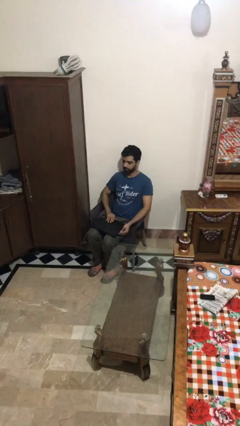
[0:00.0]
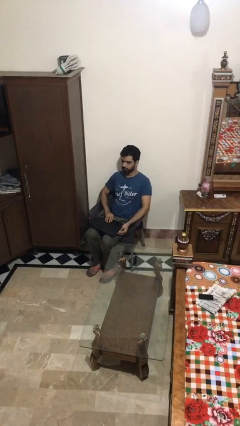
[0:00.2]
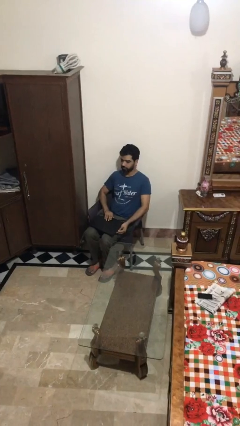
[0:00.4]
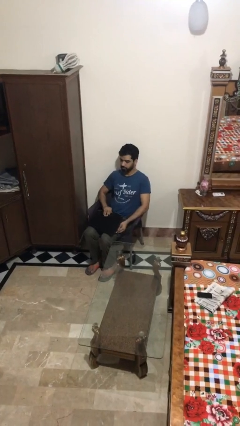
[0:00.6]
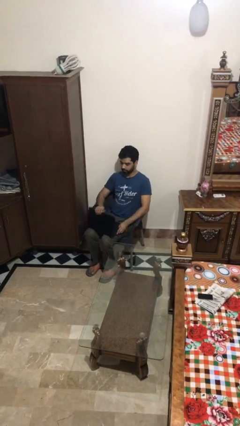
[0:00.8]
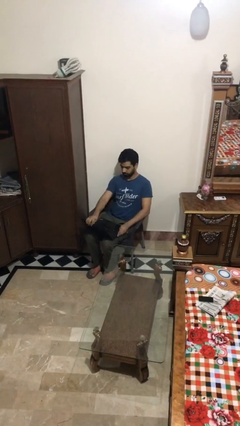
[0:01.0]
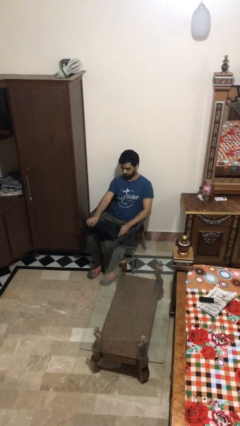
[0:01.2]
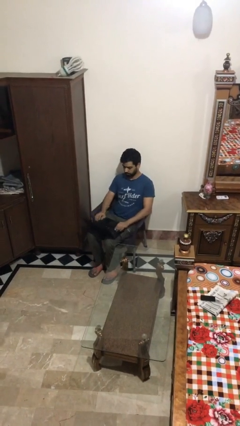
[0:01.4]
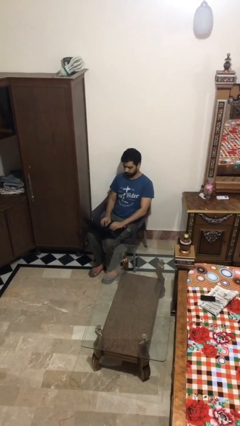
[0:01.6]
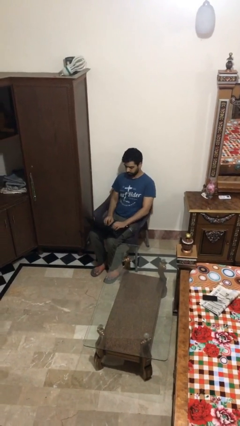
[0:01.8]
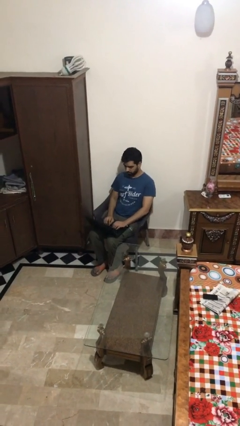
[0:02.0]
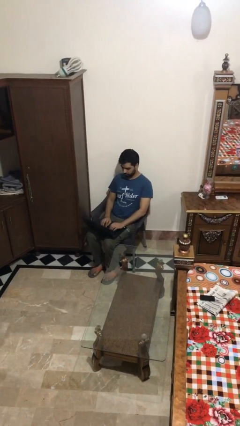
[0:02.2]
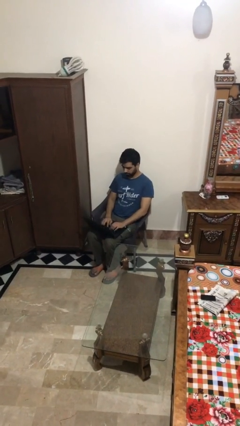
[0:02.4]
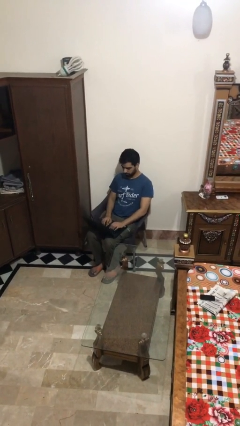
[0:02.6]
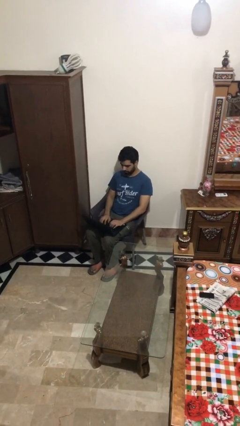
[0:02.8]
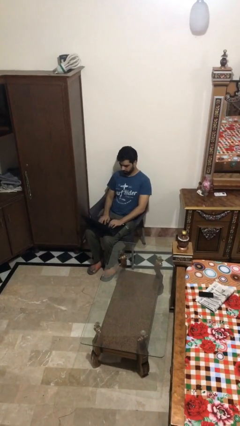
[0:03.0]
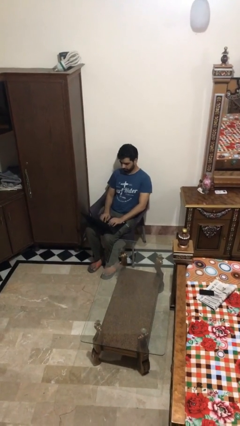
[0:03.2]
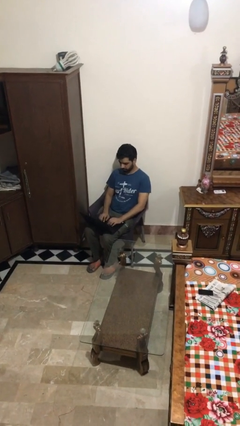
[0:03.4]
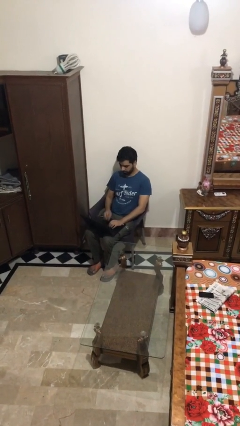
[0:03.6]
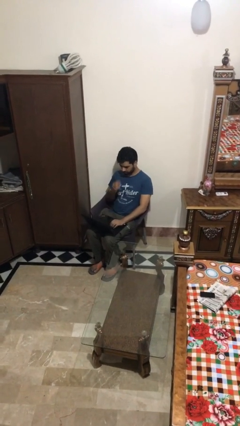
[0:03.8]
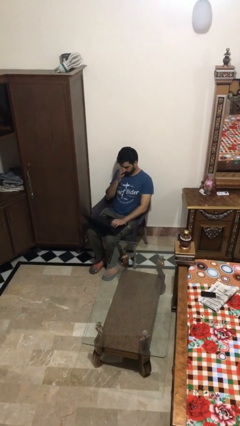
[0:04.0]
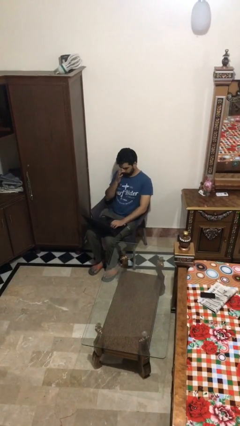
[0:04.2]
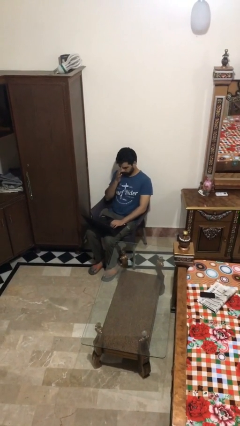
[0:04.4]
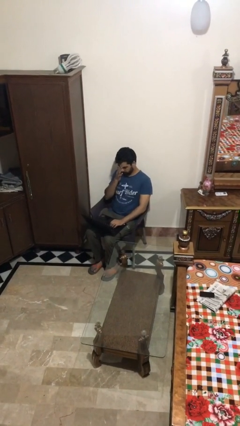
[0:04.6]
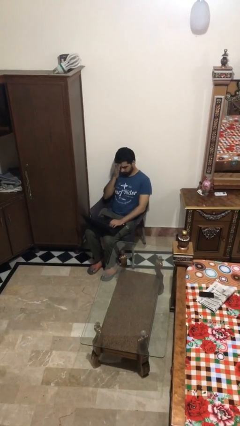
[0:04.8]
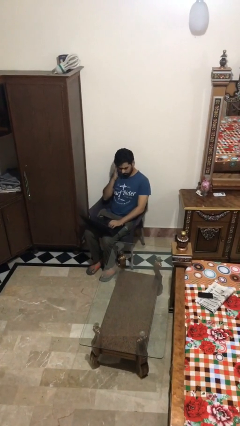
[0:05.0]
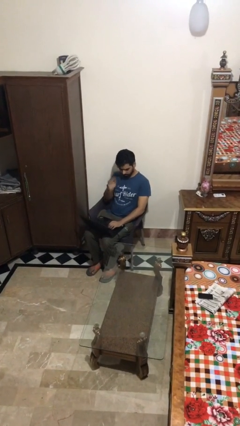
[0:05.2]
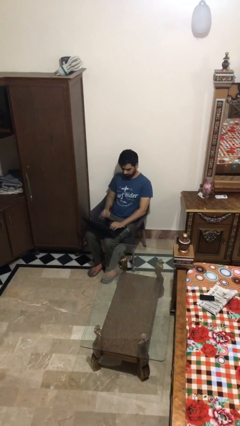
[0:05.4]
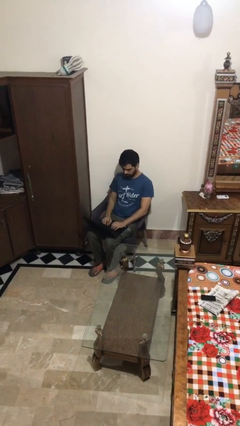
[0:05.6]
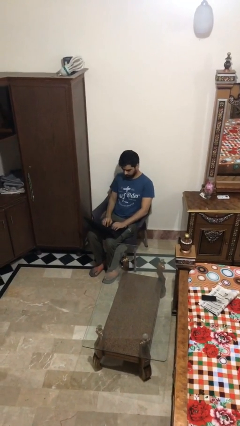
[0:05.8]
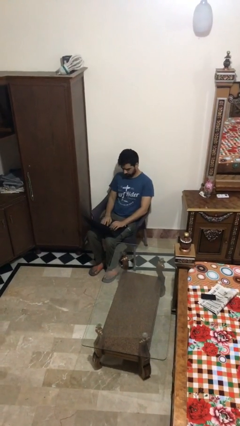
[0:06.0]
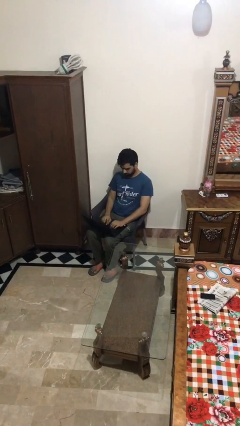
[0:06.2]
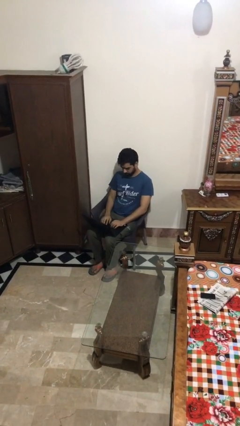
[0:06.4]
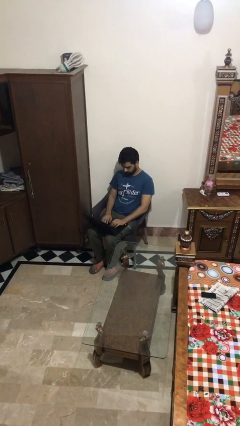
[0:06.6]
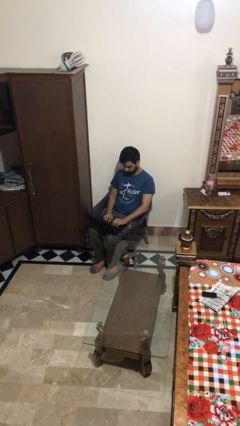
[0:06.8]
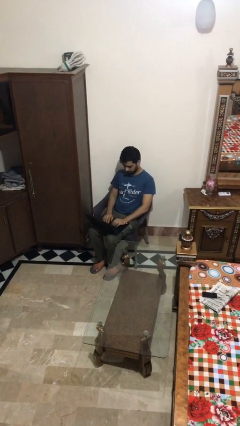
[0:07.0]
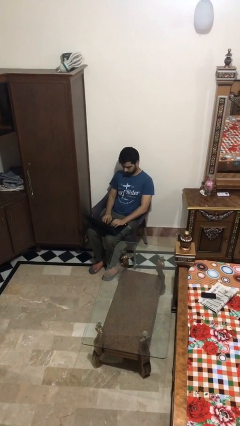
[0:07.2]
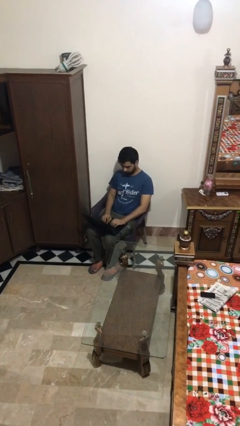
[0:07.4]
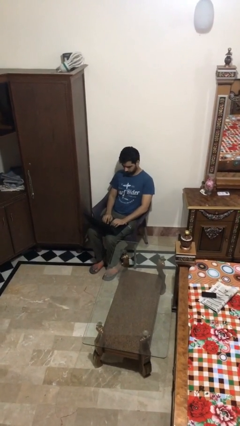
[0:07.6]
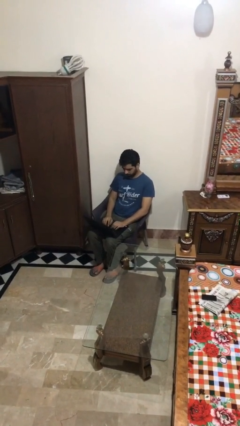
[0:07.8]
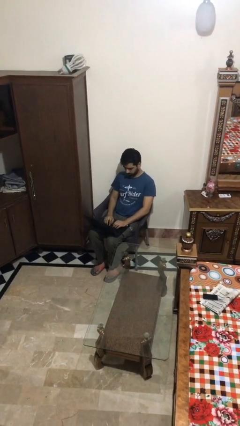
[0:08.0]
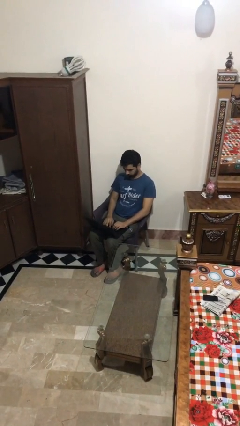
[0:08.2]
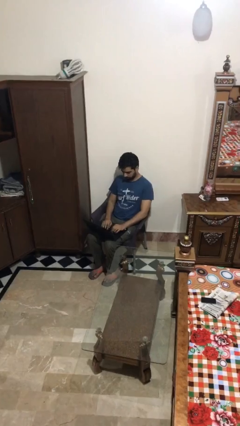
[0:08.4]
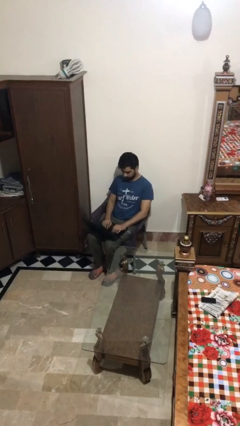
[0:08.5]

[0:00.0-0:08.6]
person interacts with laptop

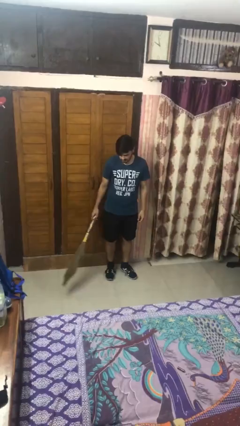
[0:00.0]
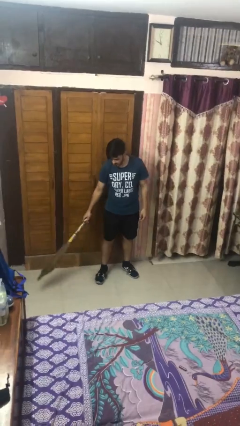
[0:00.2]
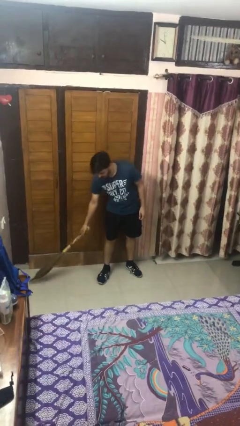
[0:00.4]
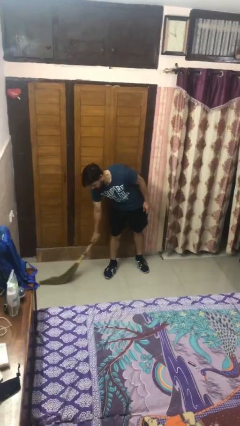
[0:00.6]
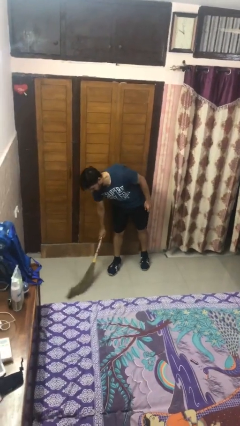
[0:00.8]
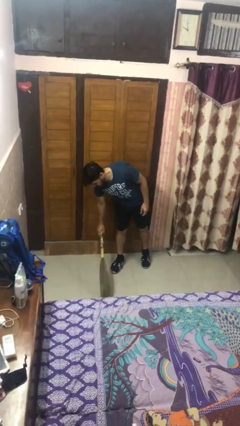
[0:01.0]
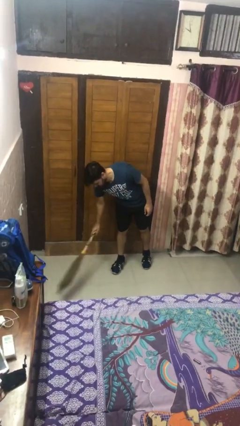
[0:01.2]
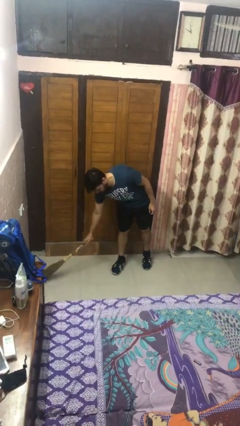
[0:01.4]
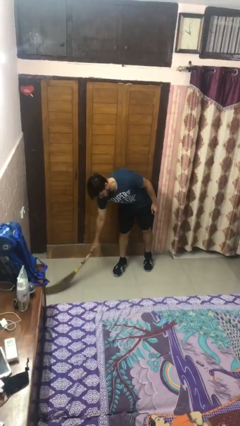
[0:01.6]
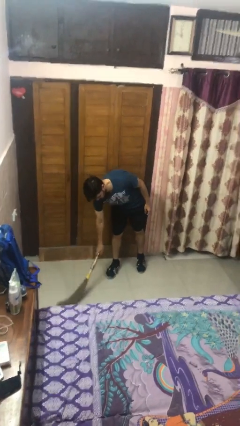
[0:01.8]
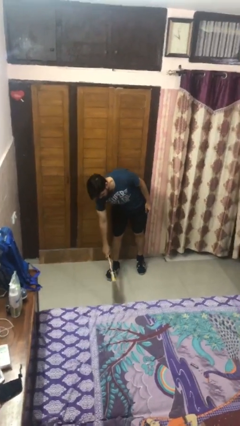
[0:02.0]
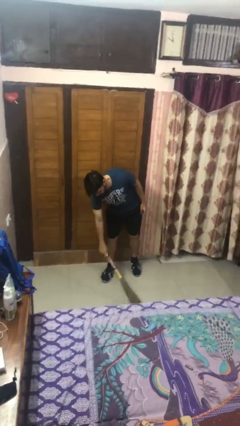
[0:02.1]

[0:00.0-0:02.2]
person sweeps floor

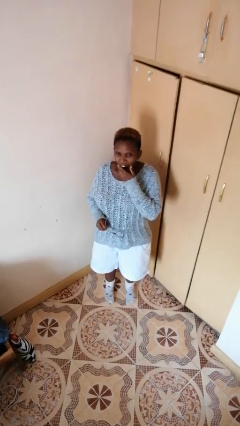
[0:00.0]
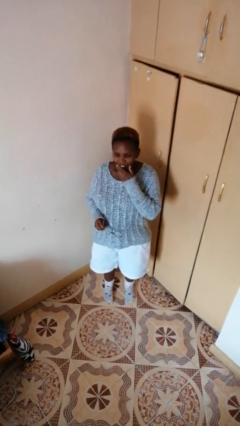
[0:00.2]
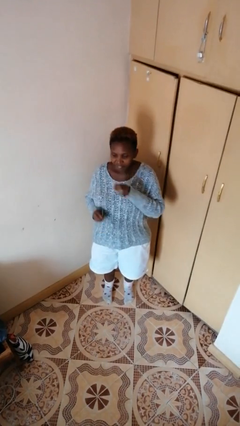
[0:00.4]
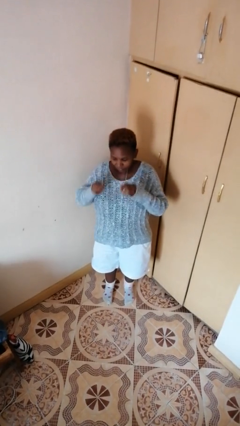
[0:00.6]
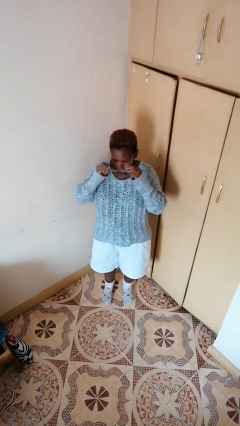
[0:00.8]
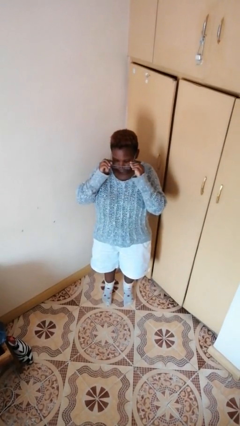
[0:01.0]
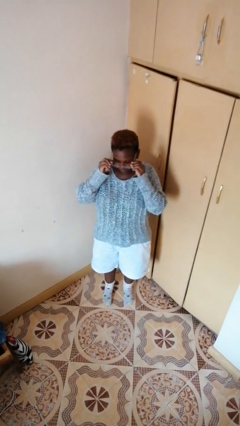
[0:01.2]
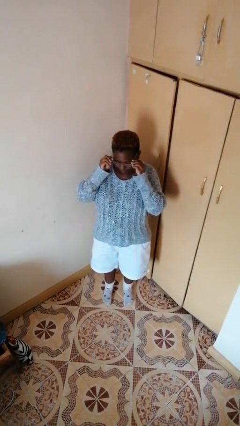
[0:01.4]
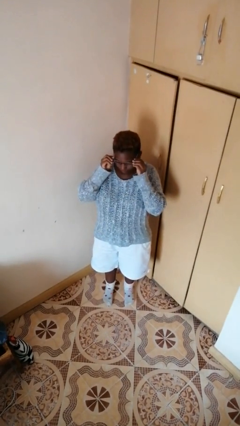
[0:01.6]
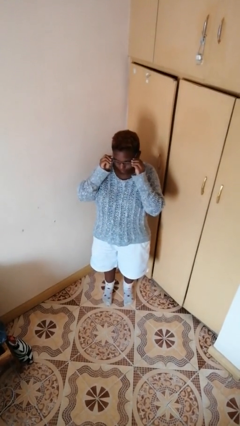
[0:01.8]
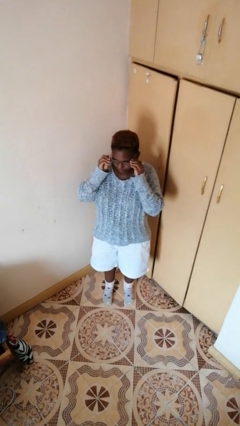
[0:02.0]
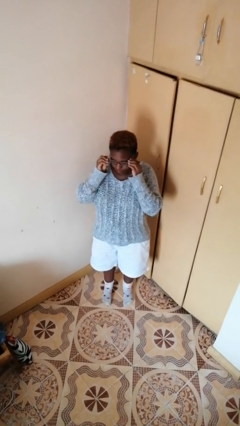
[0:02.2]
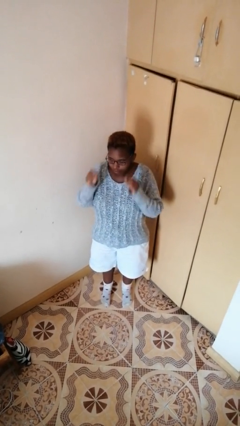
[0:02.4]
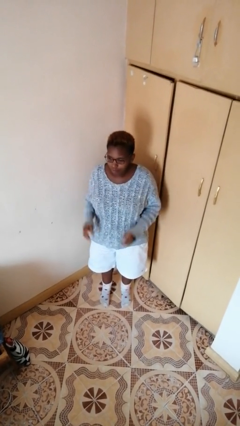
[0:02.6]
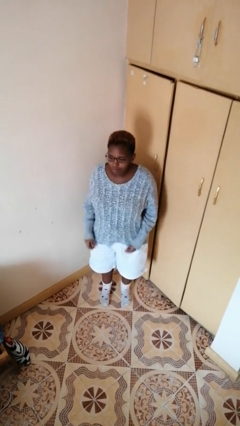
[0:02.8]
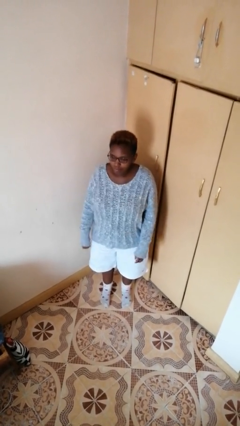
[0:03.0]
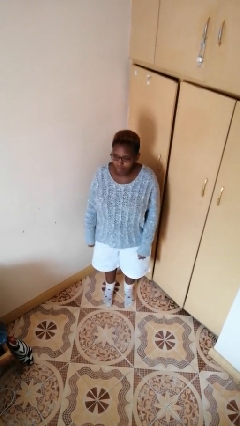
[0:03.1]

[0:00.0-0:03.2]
person puts on glasses

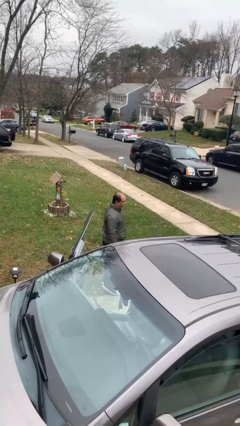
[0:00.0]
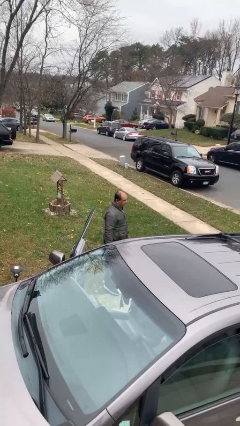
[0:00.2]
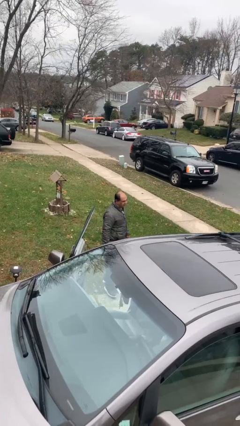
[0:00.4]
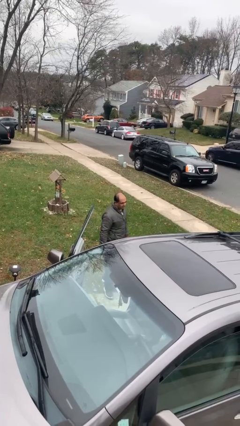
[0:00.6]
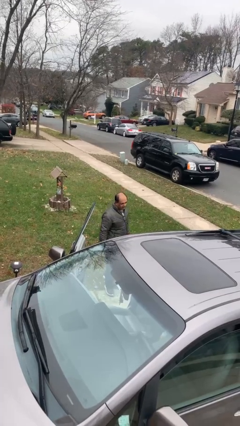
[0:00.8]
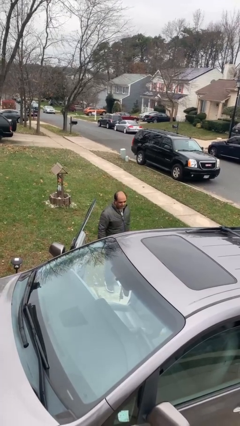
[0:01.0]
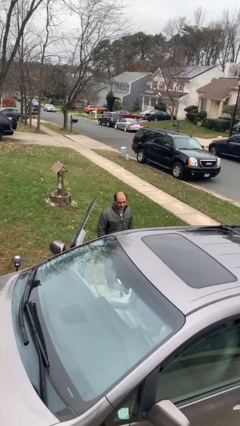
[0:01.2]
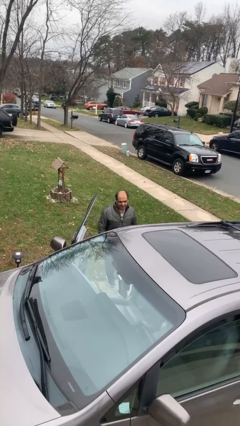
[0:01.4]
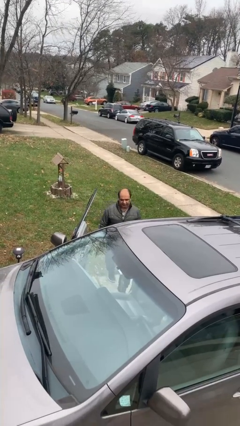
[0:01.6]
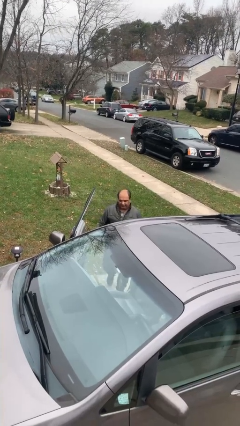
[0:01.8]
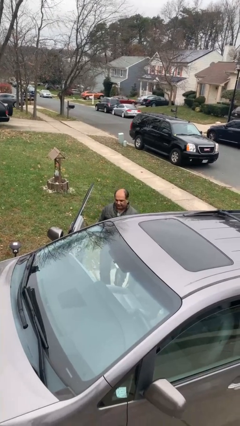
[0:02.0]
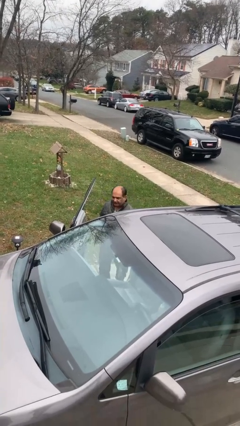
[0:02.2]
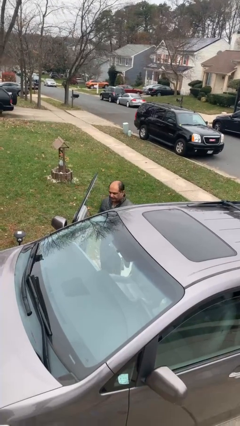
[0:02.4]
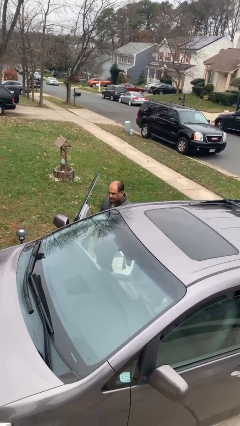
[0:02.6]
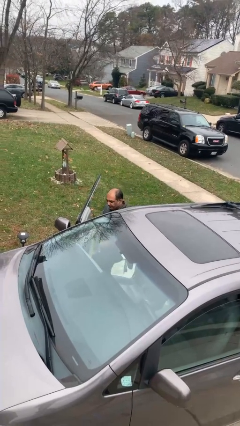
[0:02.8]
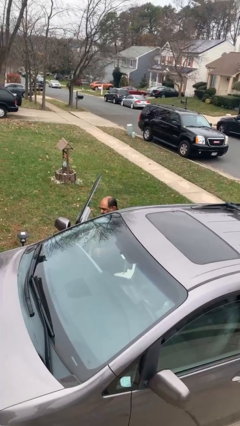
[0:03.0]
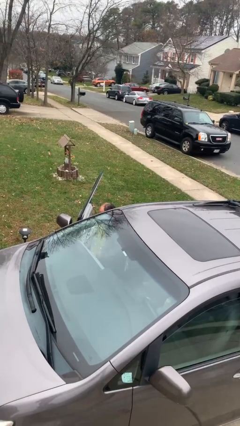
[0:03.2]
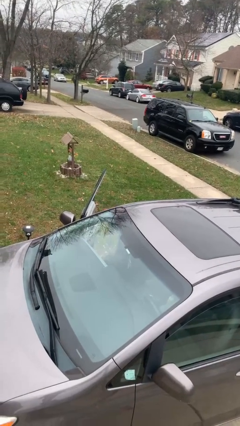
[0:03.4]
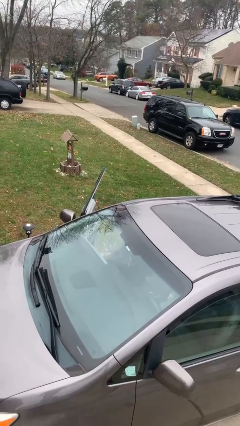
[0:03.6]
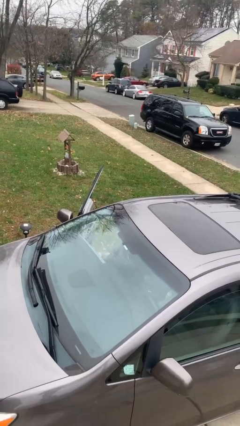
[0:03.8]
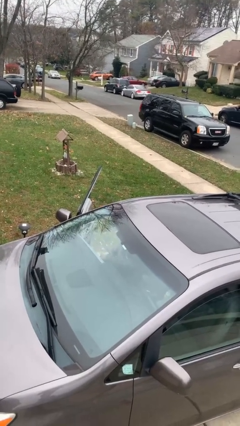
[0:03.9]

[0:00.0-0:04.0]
person enters car
